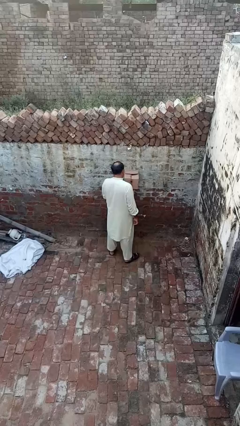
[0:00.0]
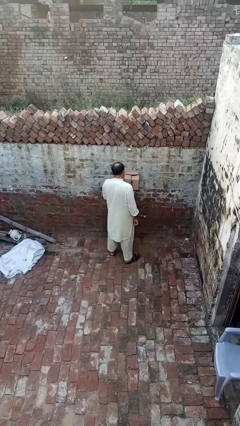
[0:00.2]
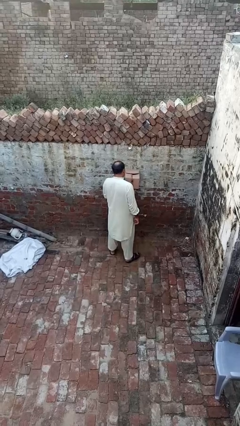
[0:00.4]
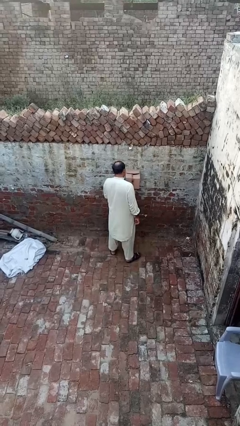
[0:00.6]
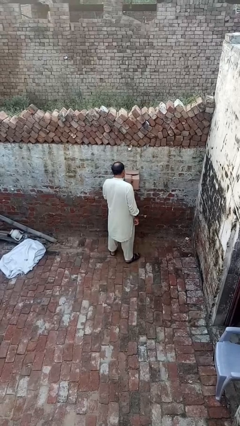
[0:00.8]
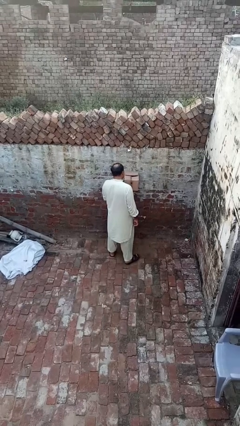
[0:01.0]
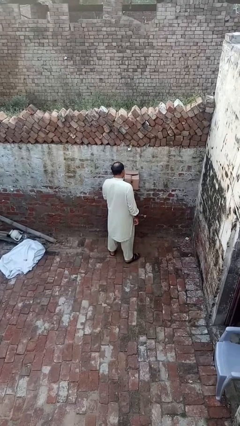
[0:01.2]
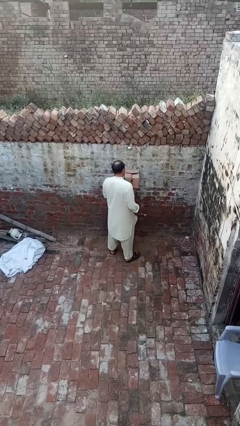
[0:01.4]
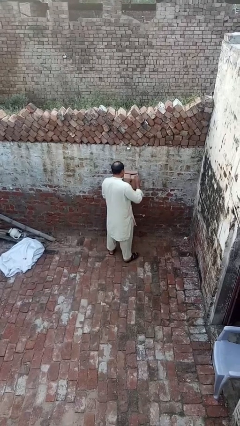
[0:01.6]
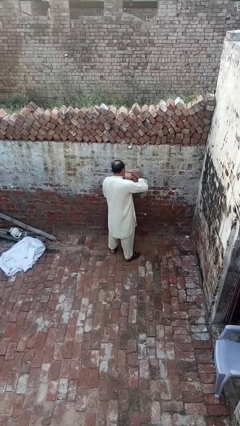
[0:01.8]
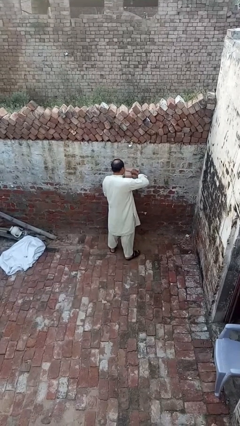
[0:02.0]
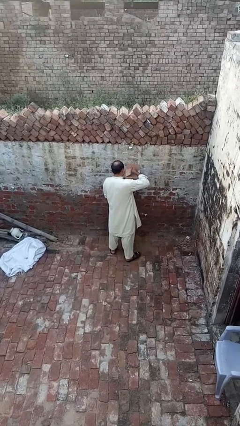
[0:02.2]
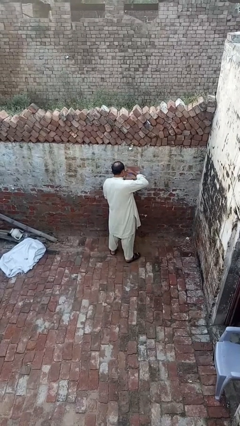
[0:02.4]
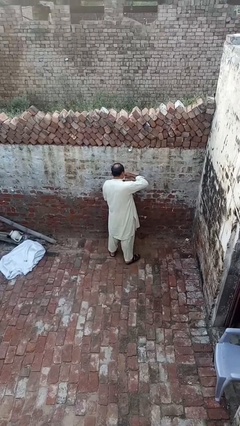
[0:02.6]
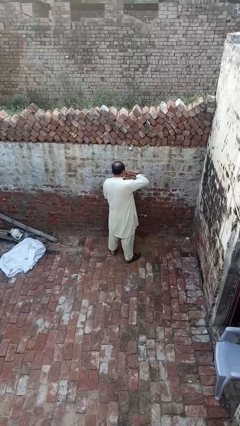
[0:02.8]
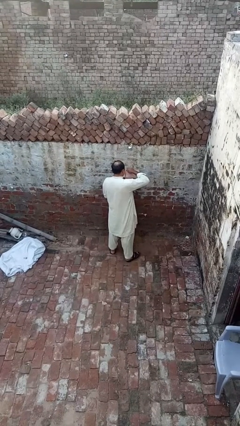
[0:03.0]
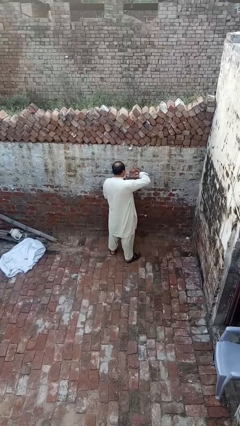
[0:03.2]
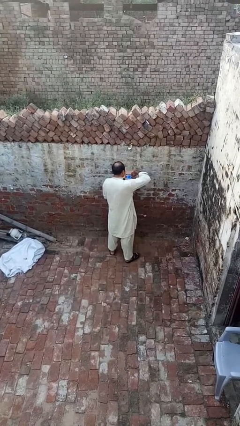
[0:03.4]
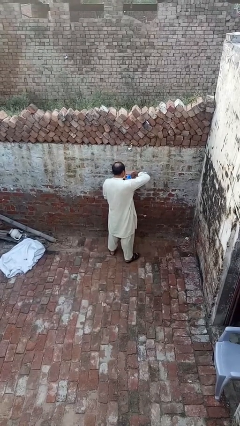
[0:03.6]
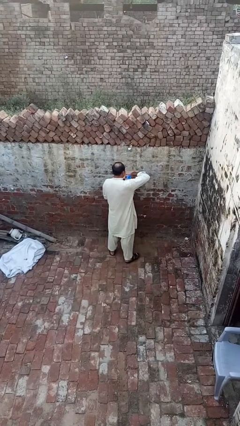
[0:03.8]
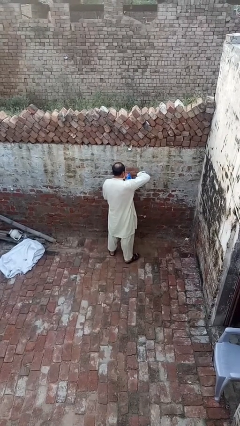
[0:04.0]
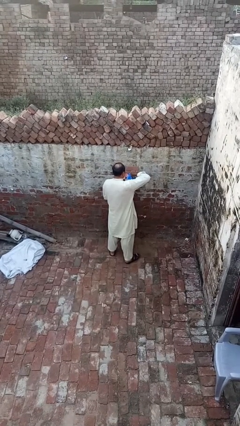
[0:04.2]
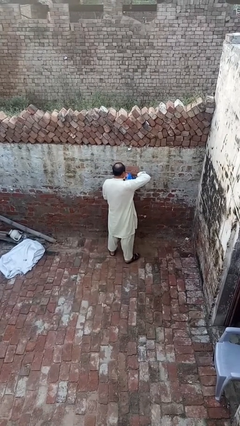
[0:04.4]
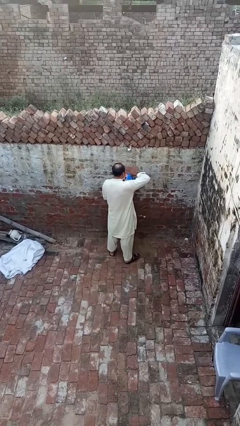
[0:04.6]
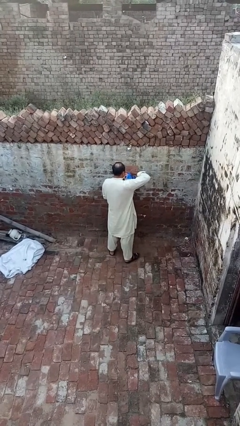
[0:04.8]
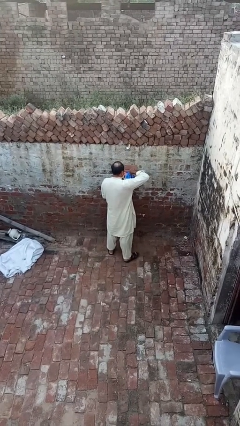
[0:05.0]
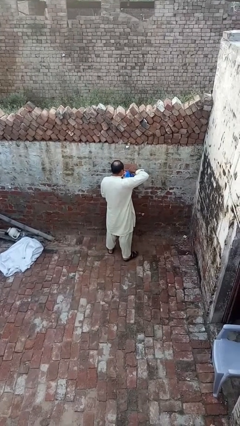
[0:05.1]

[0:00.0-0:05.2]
person opens mailbox

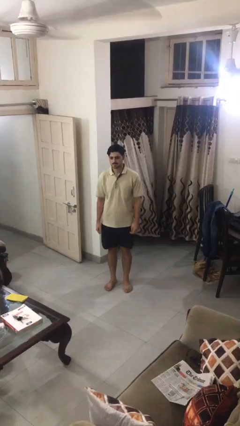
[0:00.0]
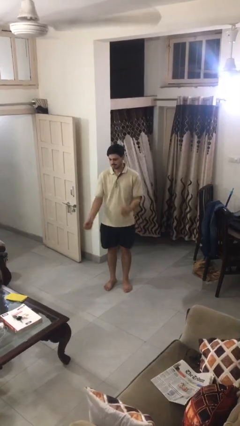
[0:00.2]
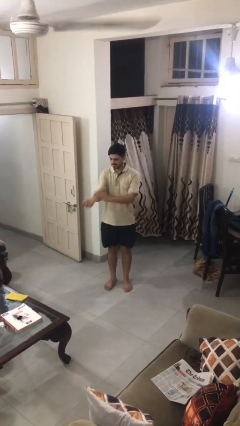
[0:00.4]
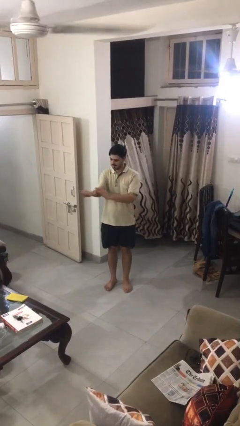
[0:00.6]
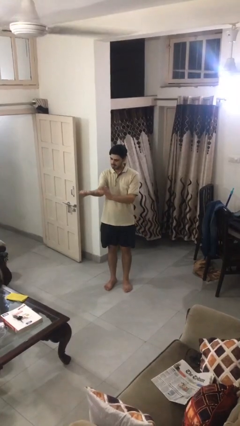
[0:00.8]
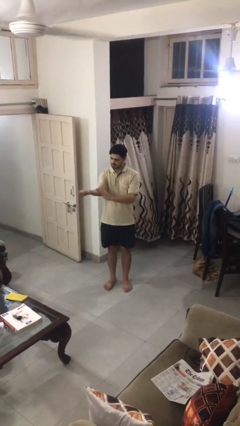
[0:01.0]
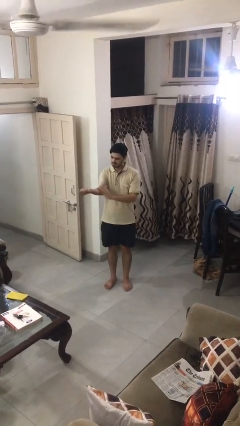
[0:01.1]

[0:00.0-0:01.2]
person swats bug

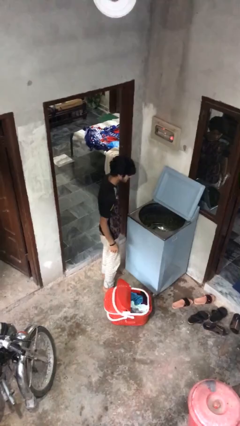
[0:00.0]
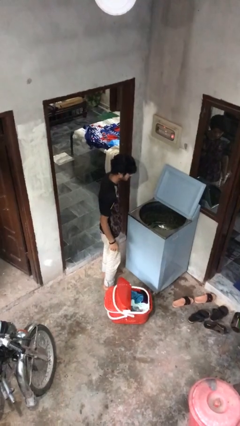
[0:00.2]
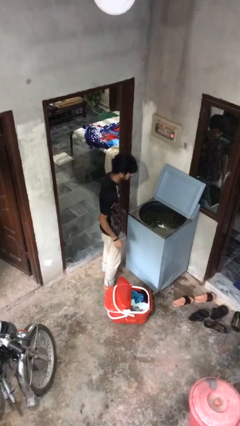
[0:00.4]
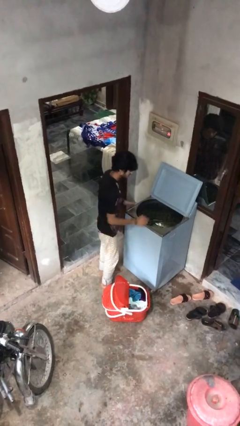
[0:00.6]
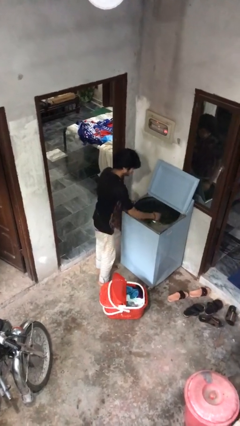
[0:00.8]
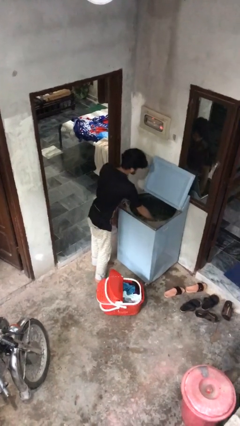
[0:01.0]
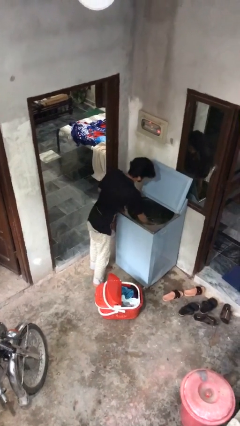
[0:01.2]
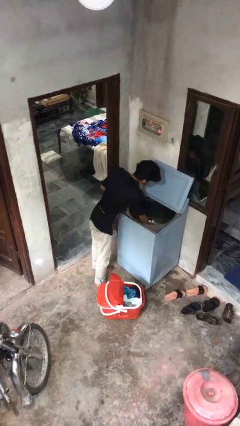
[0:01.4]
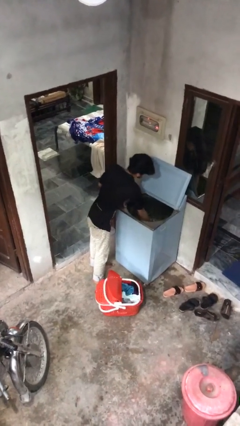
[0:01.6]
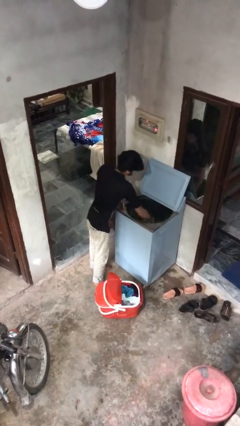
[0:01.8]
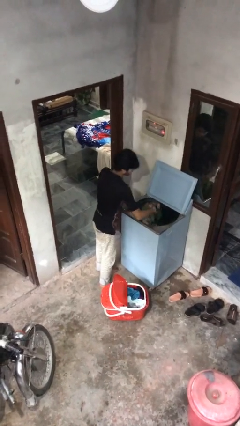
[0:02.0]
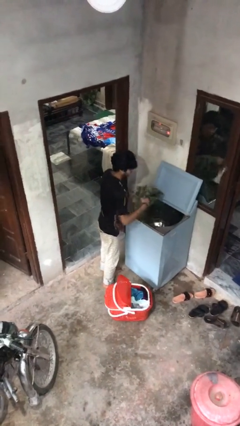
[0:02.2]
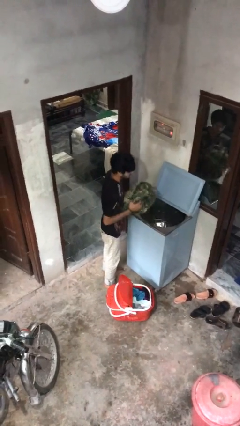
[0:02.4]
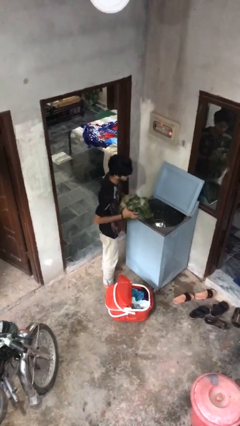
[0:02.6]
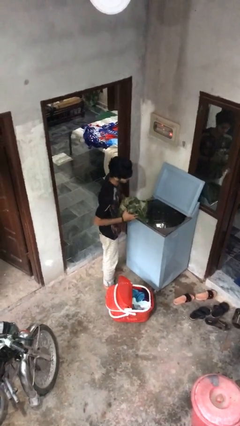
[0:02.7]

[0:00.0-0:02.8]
person unloads clotheswasher

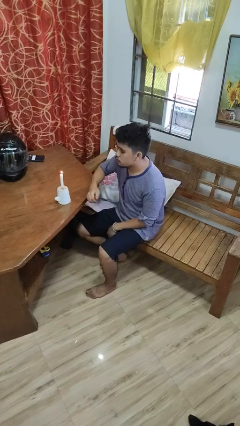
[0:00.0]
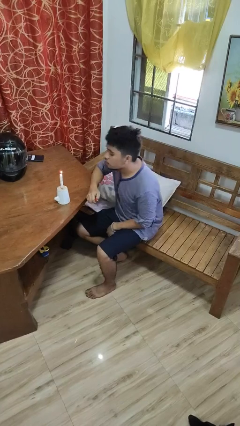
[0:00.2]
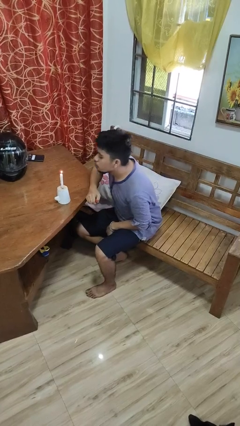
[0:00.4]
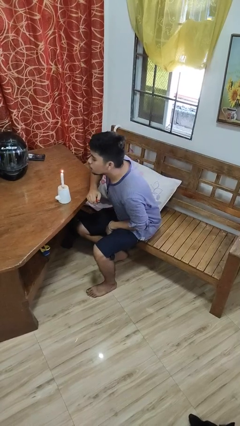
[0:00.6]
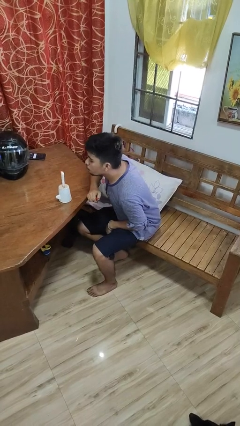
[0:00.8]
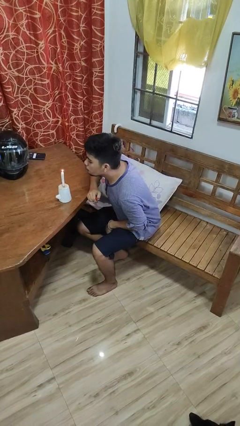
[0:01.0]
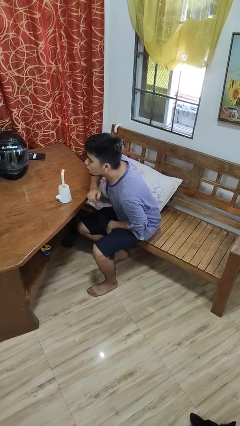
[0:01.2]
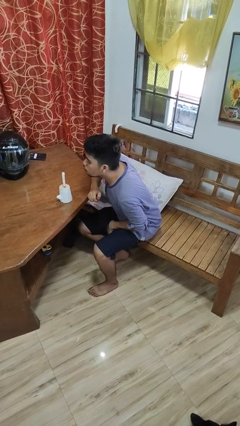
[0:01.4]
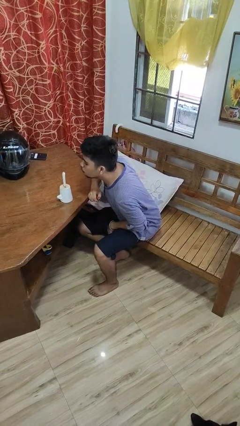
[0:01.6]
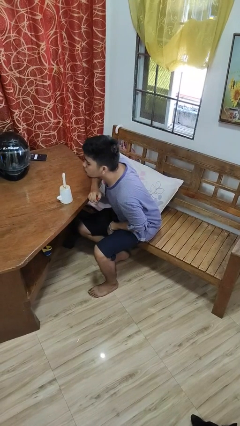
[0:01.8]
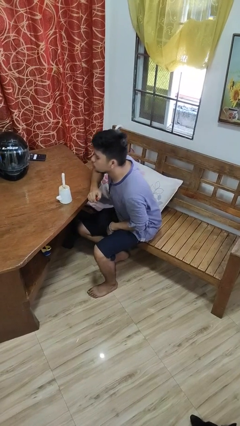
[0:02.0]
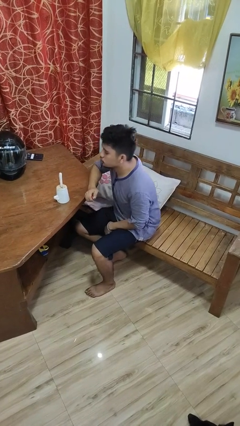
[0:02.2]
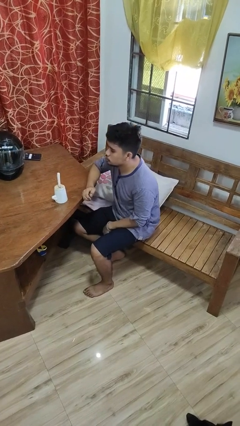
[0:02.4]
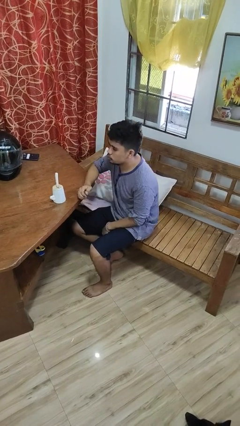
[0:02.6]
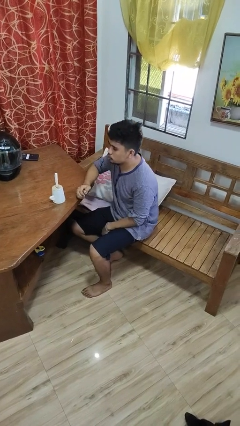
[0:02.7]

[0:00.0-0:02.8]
person extinguishes candle

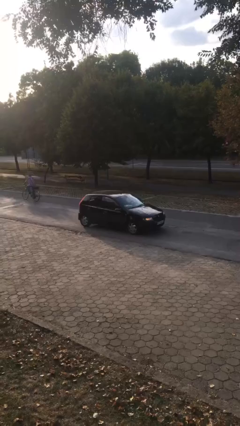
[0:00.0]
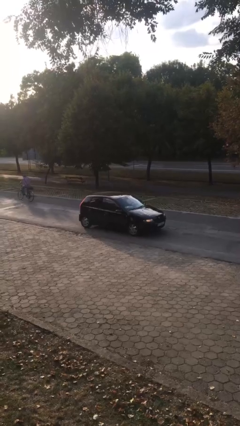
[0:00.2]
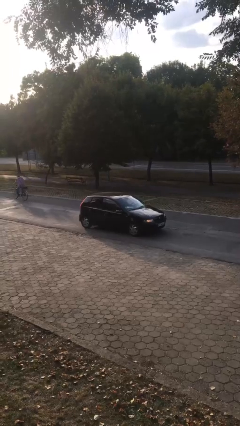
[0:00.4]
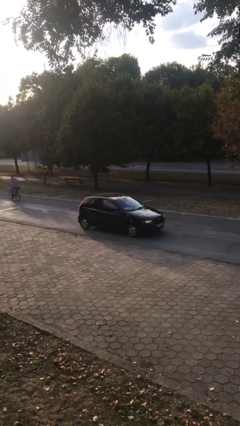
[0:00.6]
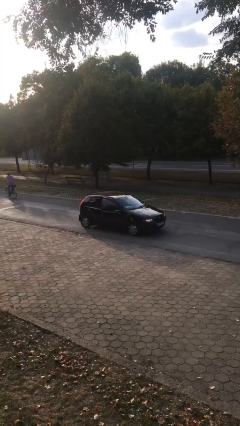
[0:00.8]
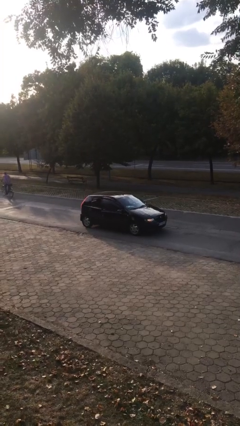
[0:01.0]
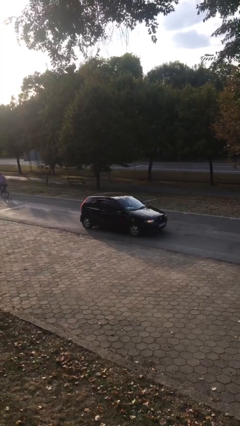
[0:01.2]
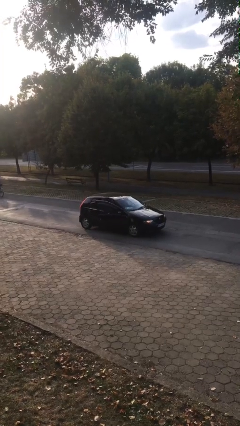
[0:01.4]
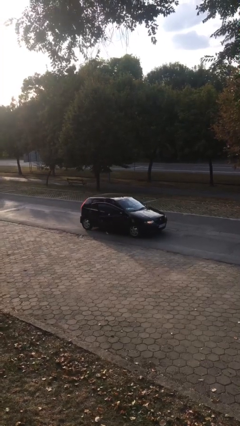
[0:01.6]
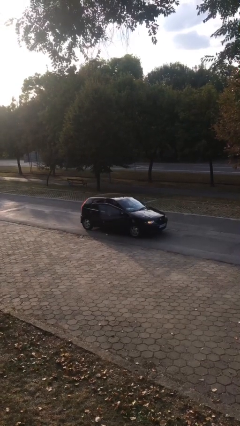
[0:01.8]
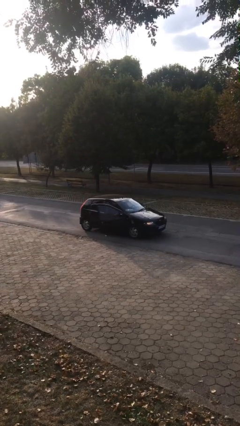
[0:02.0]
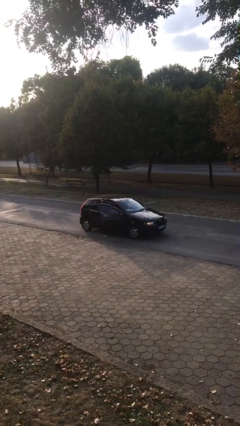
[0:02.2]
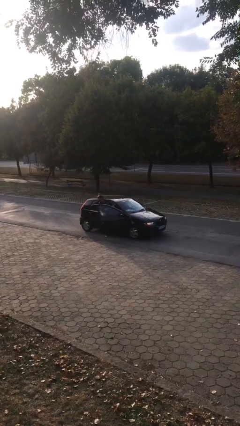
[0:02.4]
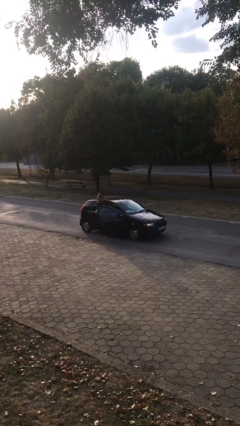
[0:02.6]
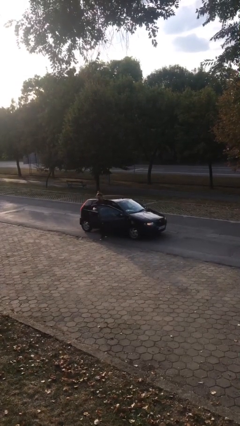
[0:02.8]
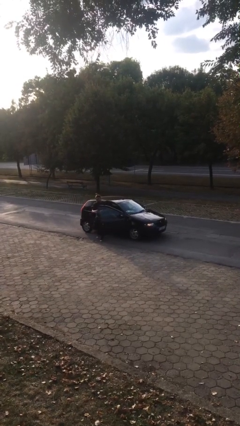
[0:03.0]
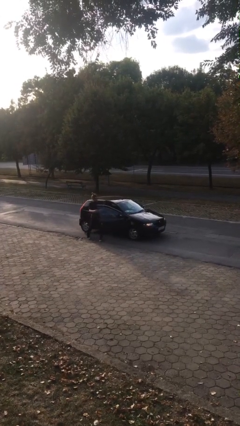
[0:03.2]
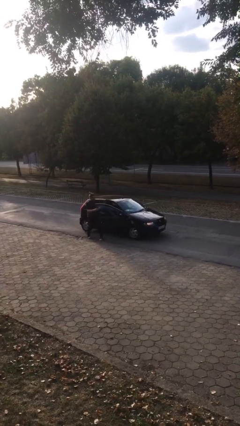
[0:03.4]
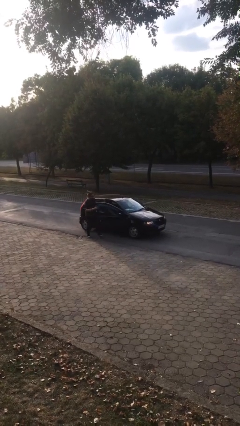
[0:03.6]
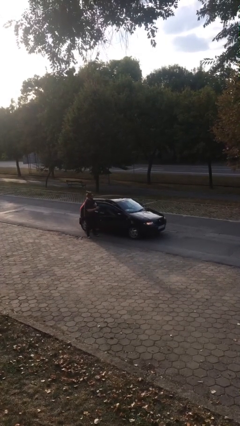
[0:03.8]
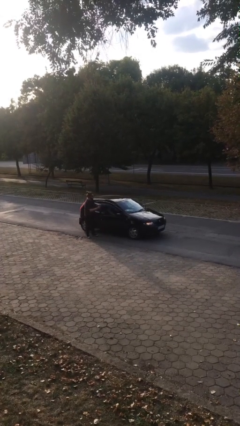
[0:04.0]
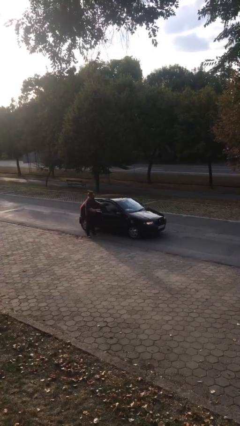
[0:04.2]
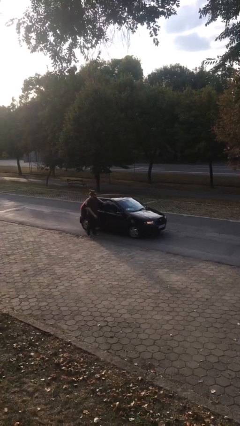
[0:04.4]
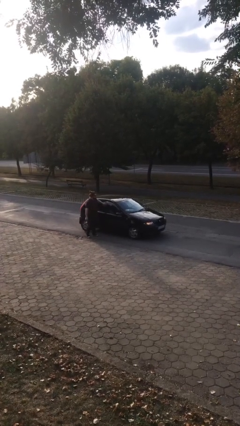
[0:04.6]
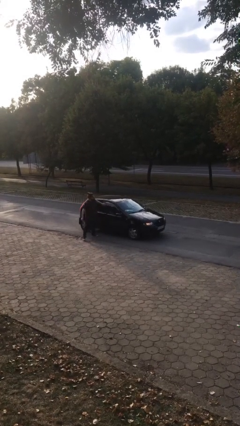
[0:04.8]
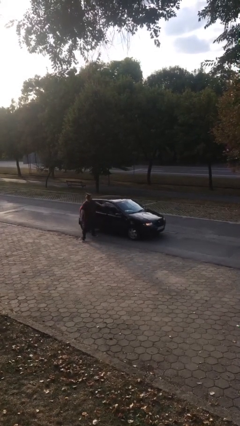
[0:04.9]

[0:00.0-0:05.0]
car drops off person

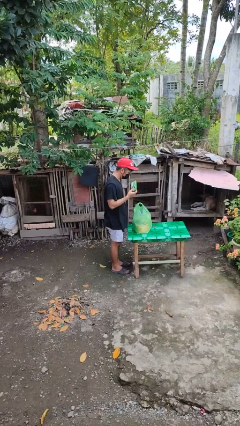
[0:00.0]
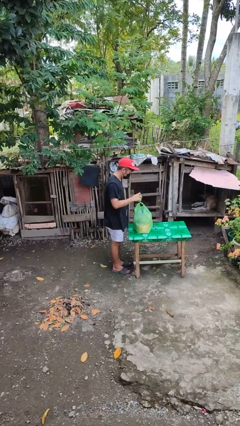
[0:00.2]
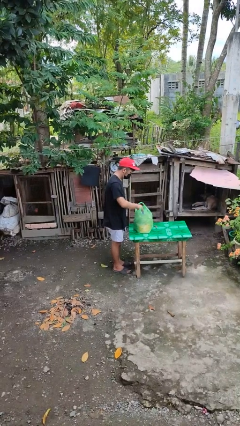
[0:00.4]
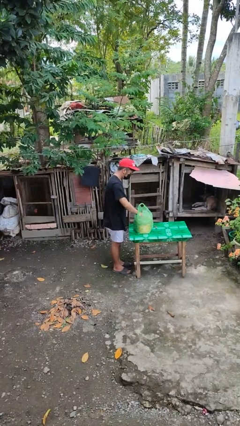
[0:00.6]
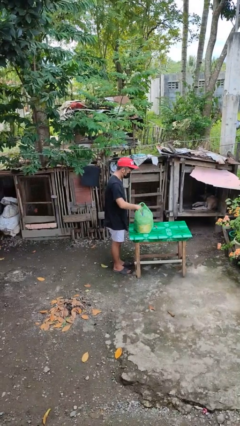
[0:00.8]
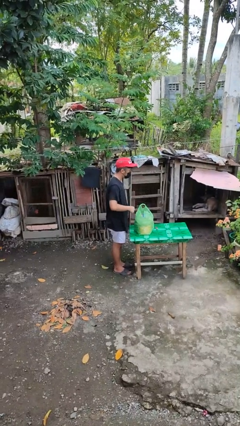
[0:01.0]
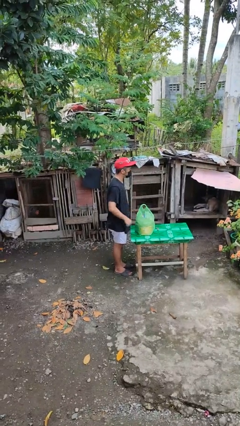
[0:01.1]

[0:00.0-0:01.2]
person puts object into bag
